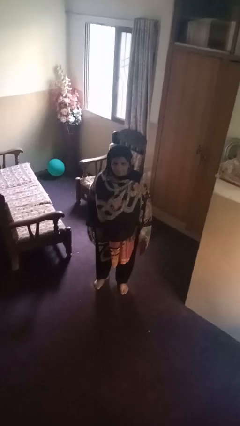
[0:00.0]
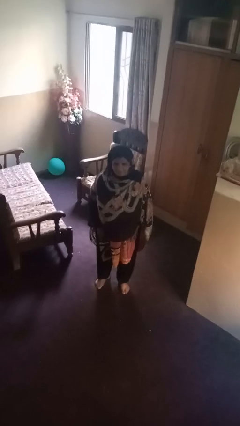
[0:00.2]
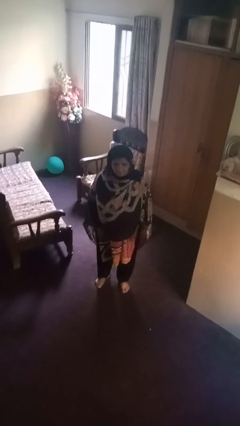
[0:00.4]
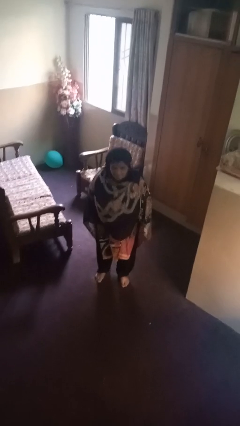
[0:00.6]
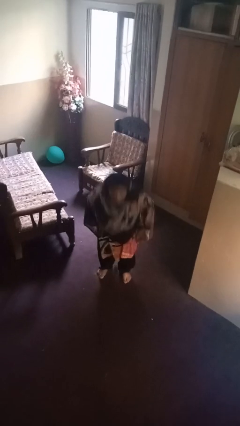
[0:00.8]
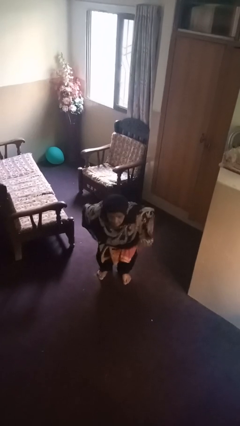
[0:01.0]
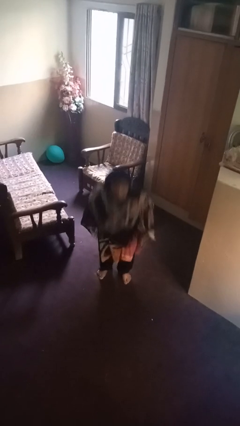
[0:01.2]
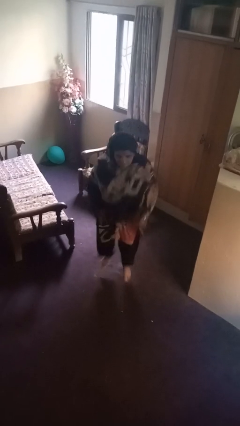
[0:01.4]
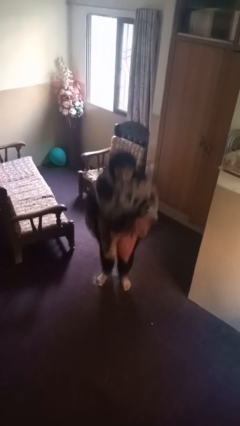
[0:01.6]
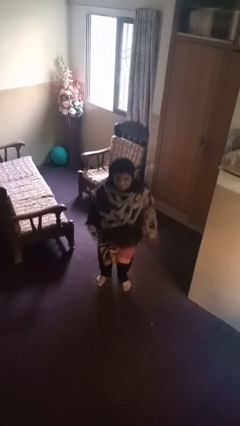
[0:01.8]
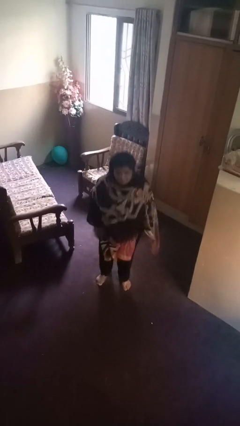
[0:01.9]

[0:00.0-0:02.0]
person jumps

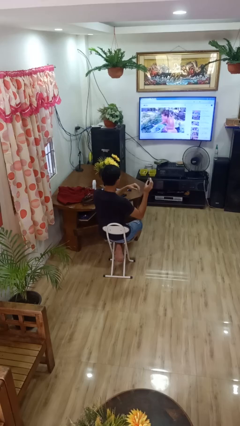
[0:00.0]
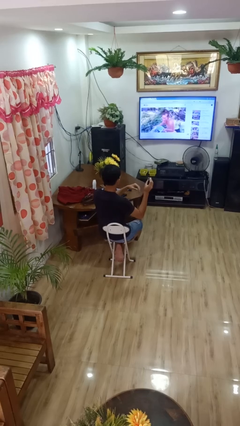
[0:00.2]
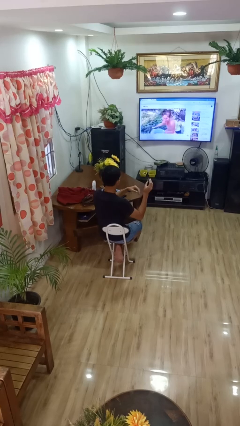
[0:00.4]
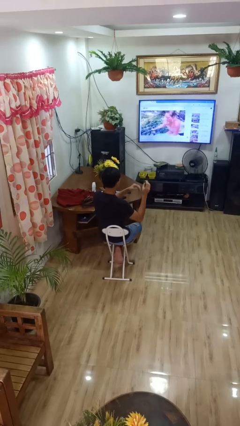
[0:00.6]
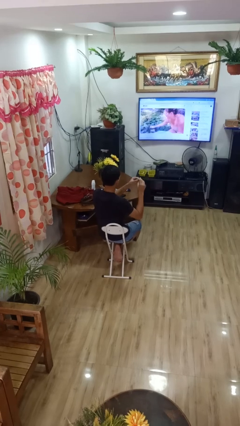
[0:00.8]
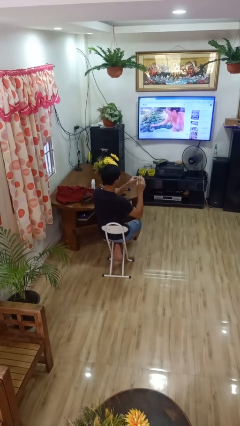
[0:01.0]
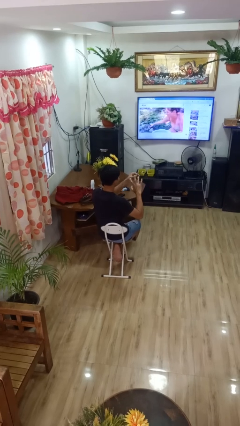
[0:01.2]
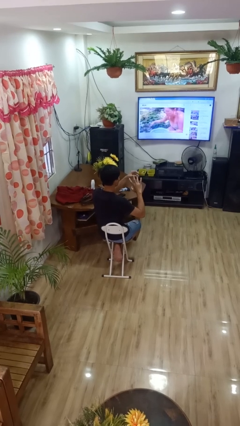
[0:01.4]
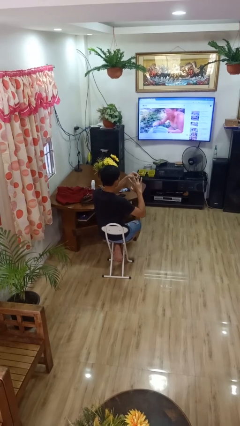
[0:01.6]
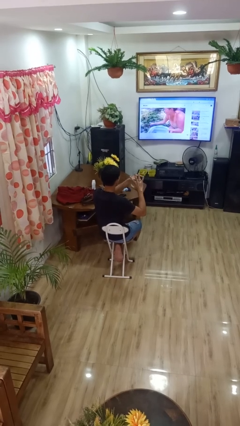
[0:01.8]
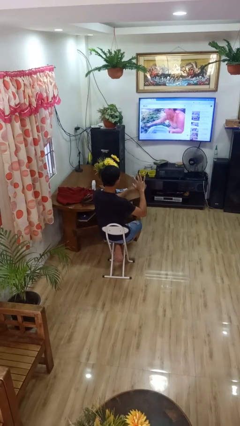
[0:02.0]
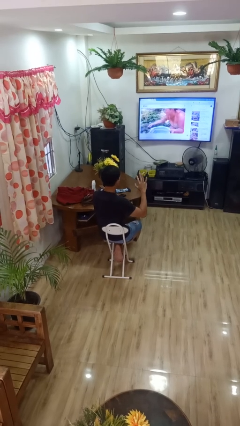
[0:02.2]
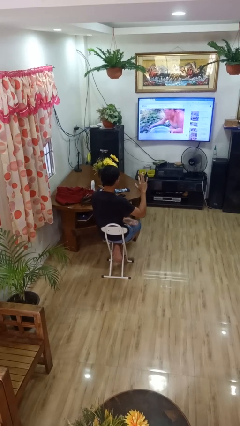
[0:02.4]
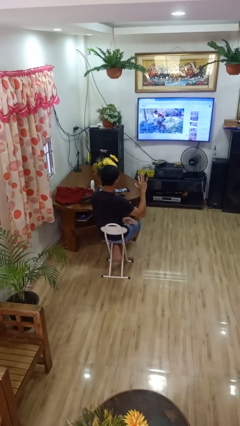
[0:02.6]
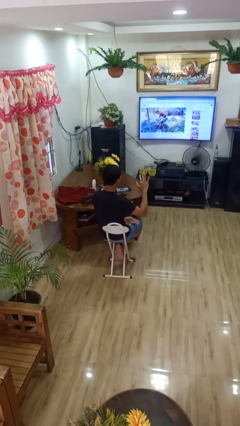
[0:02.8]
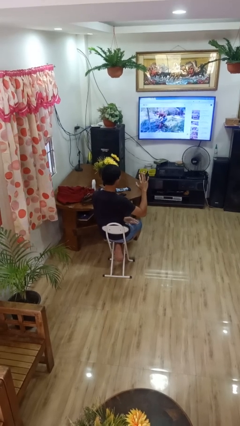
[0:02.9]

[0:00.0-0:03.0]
person puts on ring

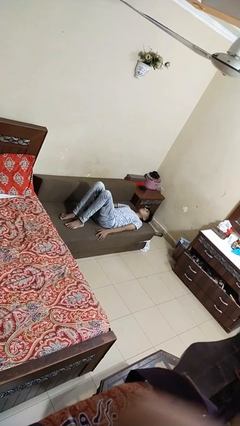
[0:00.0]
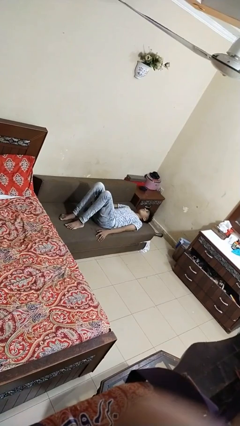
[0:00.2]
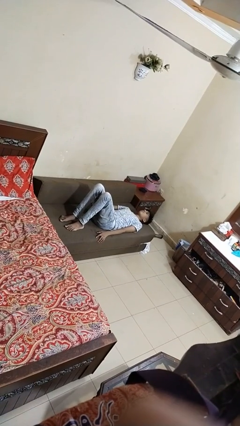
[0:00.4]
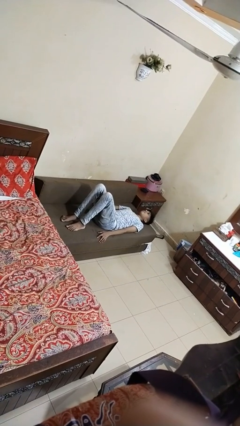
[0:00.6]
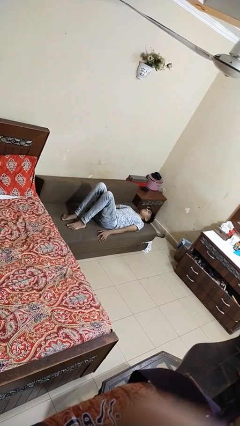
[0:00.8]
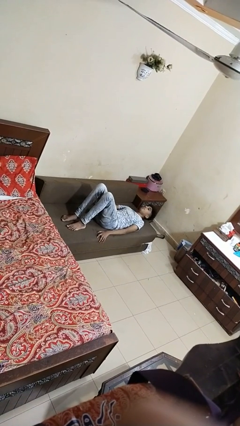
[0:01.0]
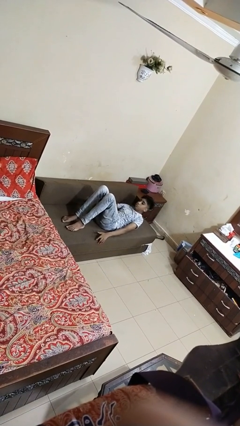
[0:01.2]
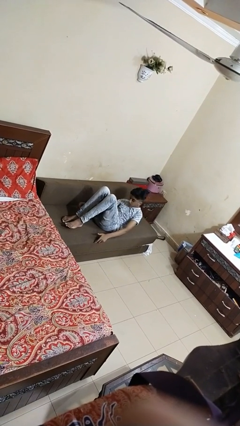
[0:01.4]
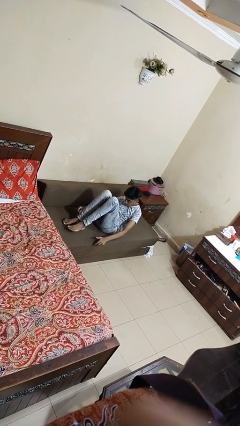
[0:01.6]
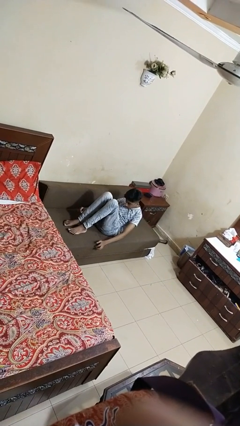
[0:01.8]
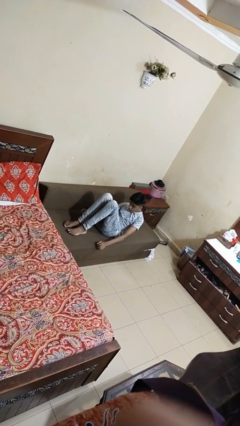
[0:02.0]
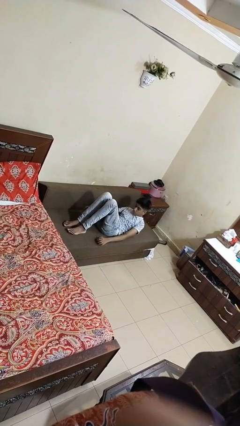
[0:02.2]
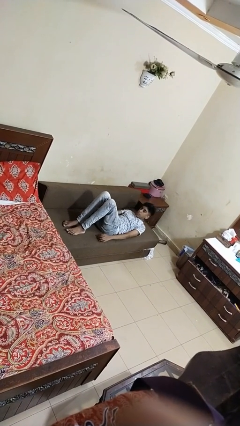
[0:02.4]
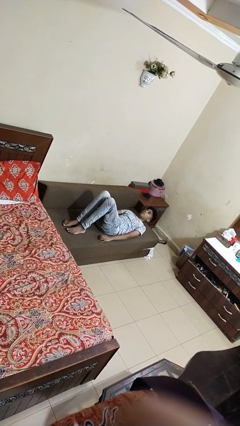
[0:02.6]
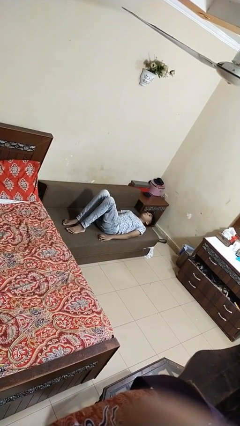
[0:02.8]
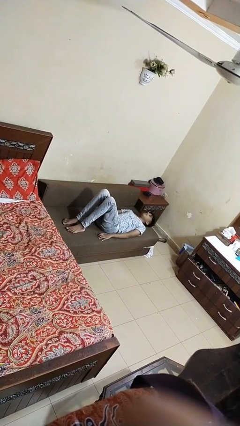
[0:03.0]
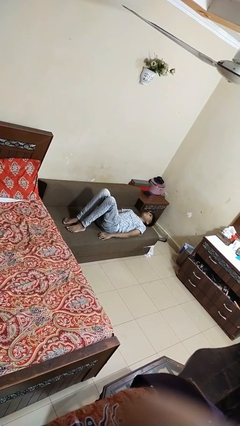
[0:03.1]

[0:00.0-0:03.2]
person exercises with situp

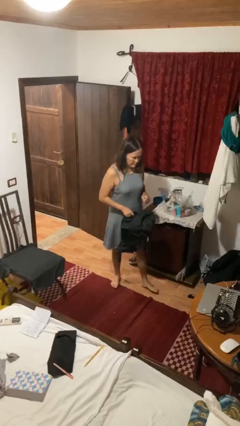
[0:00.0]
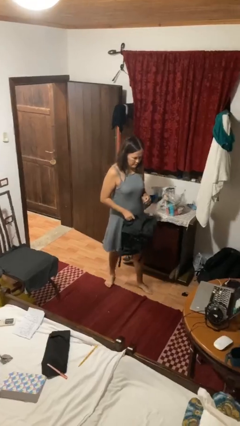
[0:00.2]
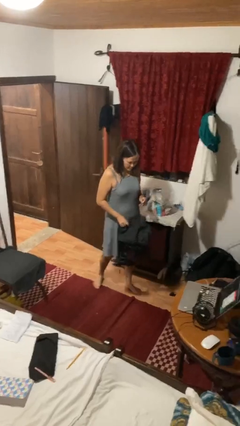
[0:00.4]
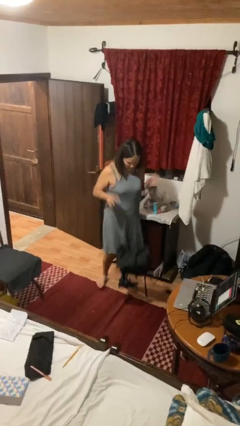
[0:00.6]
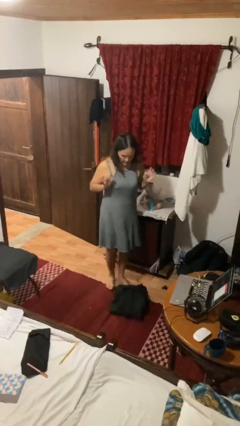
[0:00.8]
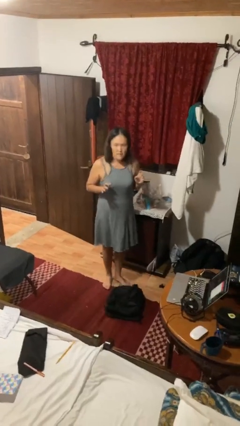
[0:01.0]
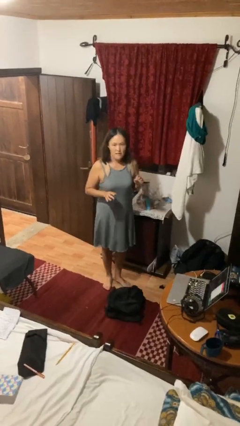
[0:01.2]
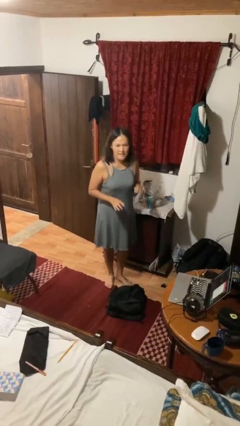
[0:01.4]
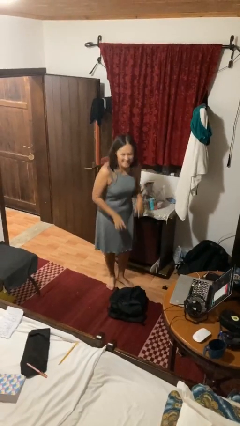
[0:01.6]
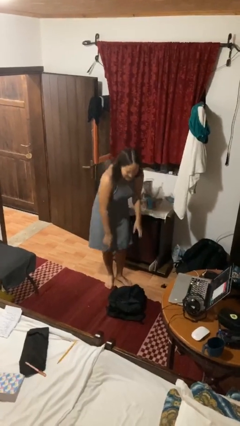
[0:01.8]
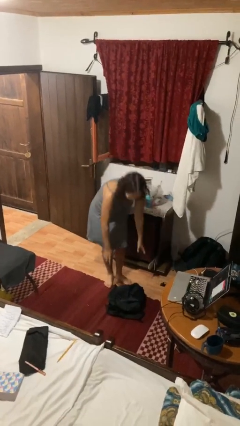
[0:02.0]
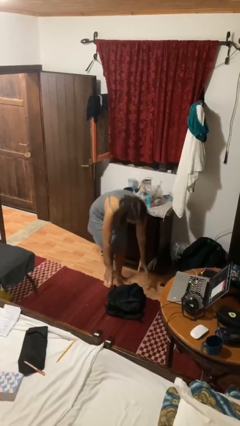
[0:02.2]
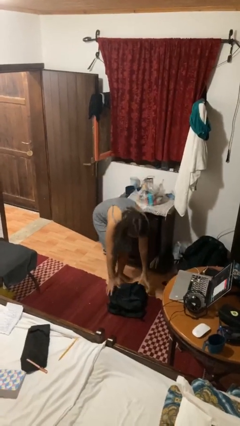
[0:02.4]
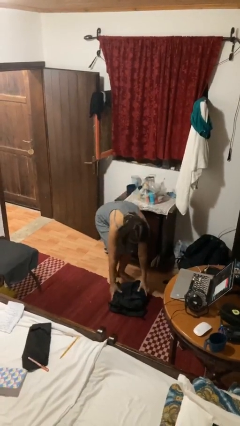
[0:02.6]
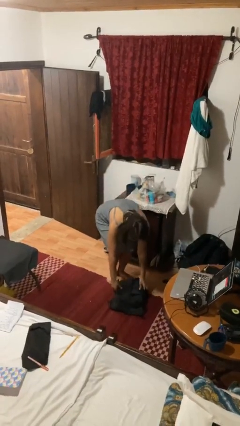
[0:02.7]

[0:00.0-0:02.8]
person drops object

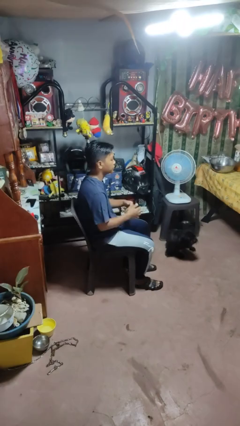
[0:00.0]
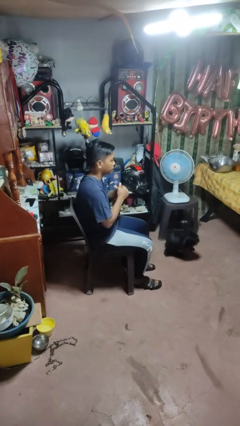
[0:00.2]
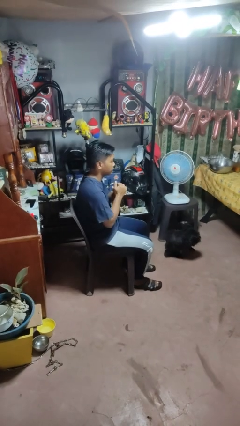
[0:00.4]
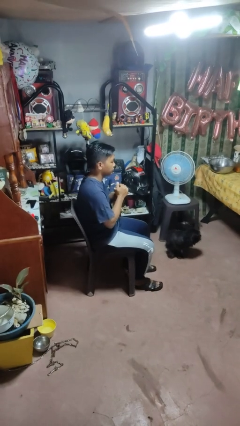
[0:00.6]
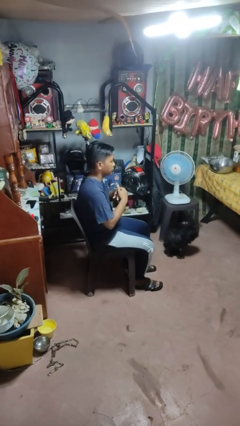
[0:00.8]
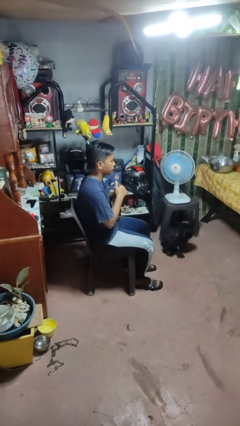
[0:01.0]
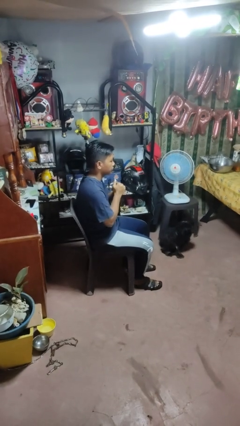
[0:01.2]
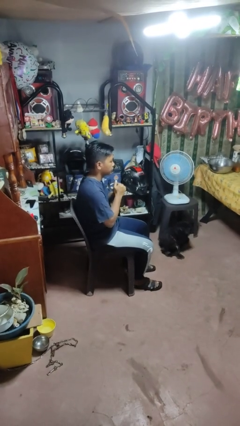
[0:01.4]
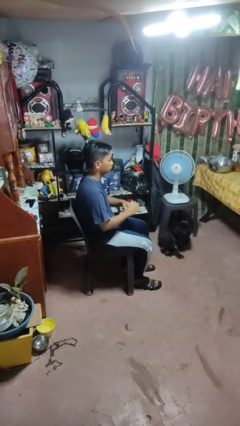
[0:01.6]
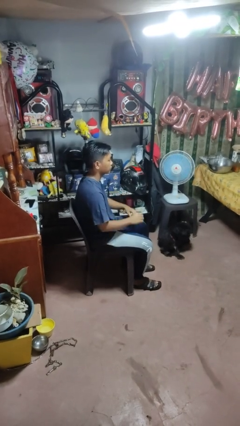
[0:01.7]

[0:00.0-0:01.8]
person cracks knuckles

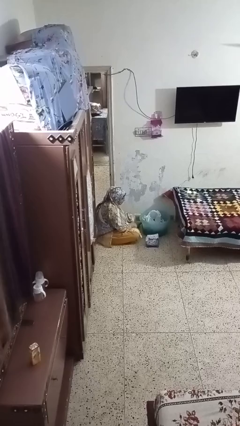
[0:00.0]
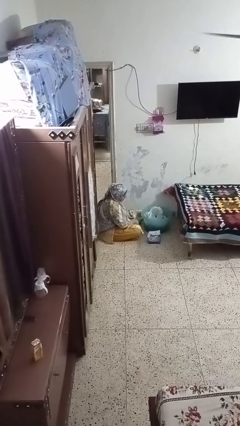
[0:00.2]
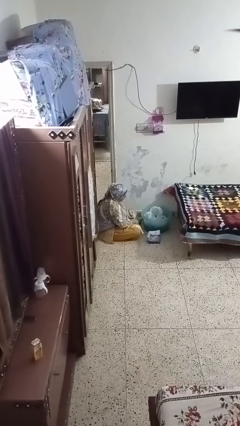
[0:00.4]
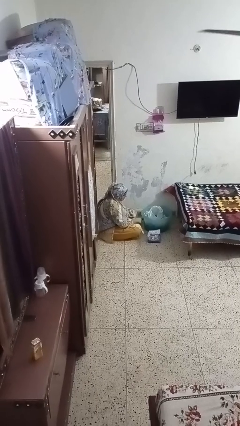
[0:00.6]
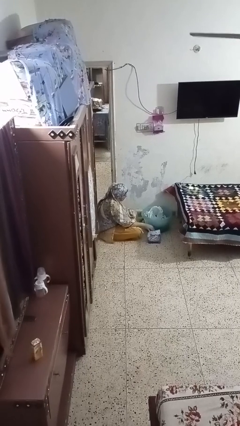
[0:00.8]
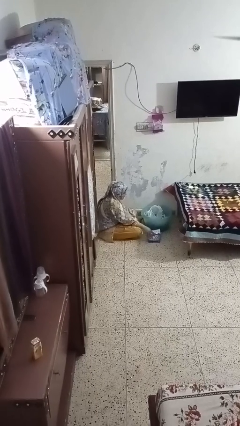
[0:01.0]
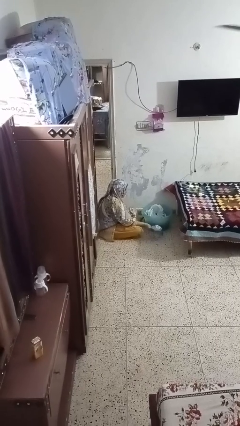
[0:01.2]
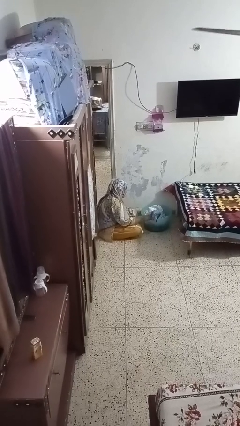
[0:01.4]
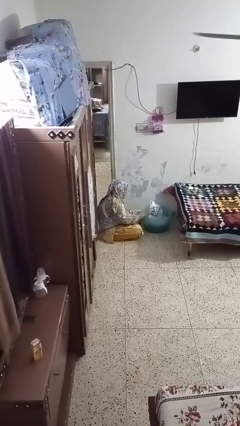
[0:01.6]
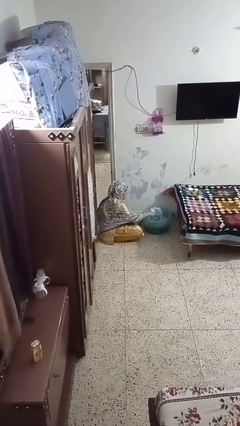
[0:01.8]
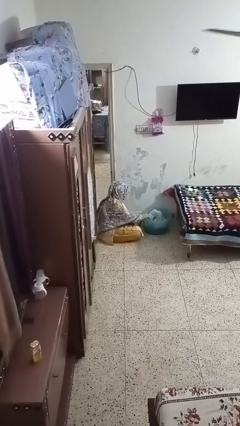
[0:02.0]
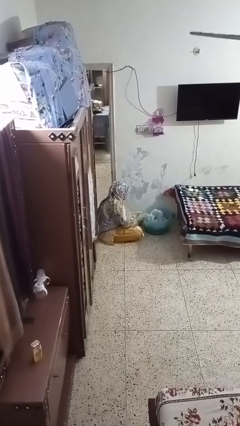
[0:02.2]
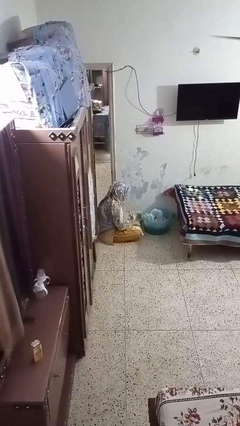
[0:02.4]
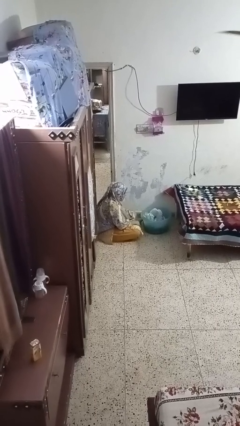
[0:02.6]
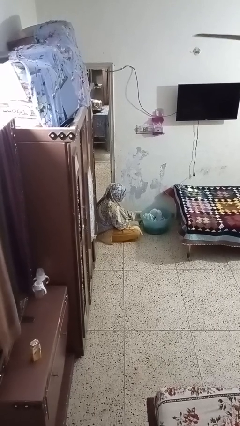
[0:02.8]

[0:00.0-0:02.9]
person puts object into basket

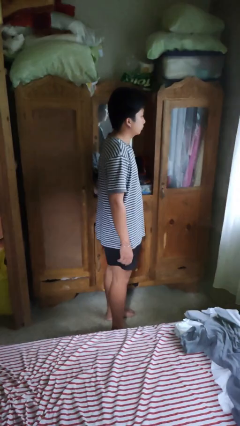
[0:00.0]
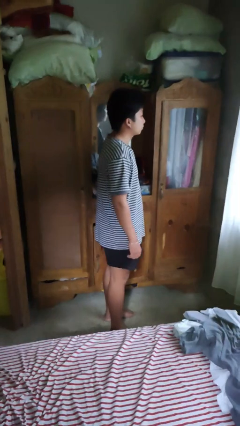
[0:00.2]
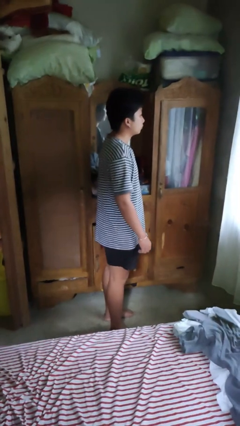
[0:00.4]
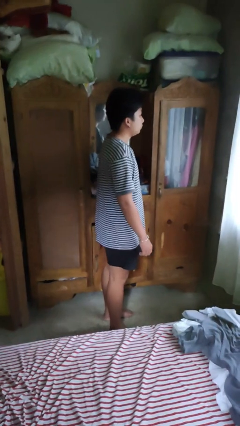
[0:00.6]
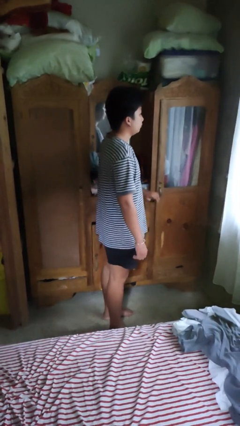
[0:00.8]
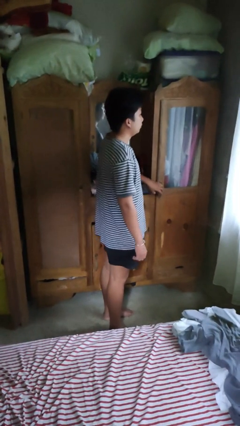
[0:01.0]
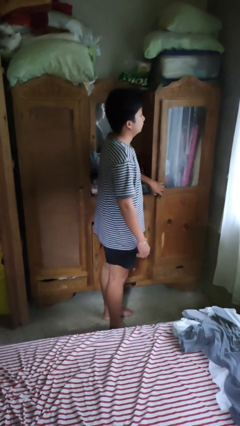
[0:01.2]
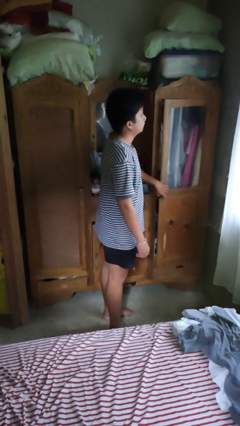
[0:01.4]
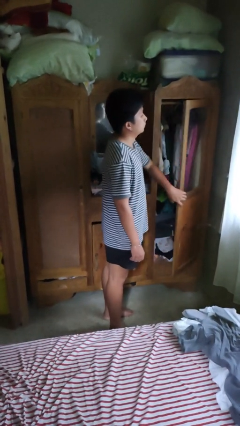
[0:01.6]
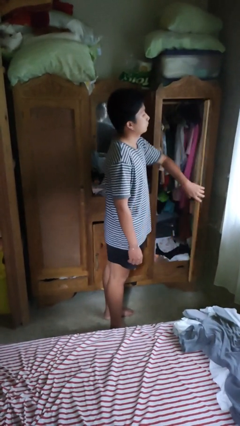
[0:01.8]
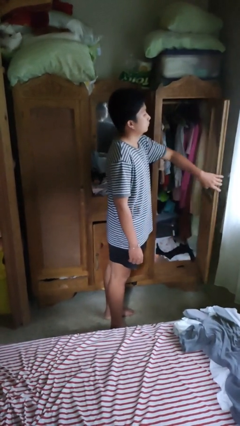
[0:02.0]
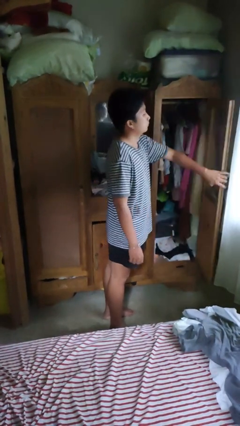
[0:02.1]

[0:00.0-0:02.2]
person opens closet door
